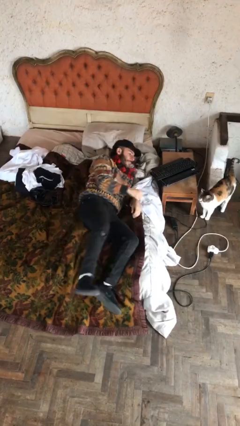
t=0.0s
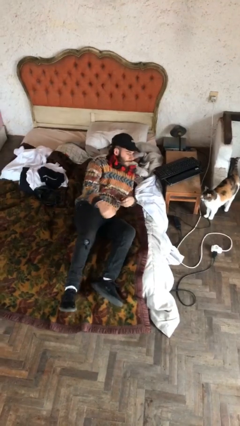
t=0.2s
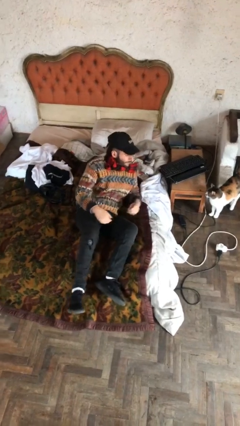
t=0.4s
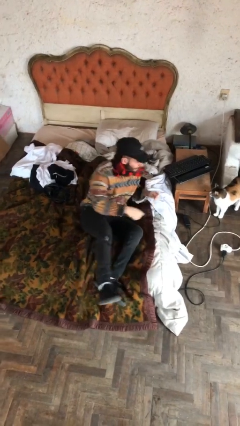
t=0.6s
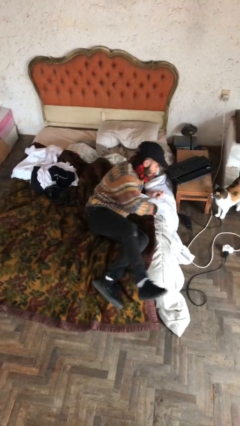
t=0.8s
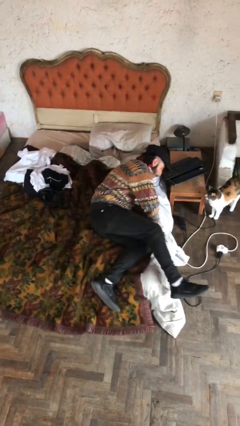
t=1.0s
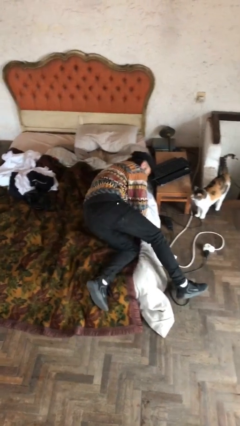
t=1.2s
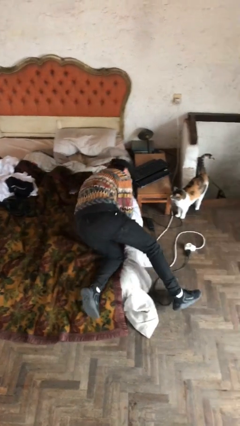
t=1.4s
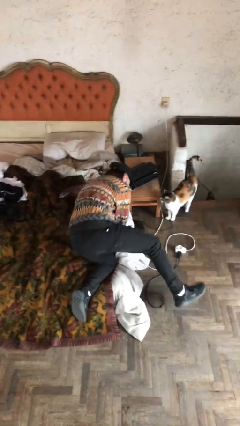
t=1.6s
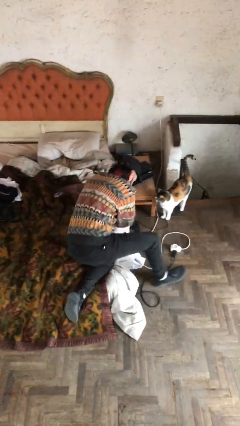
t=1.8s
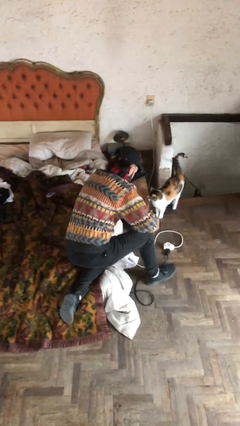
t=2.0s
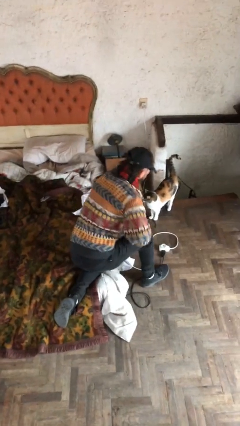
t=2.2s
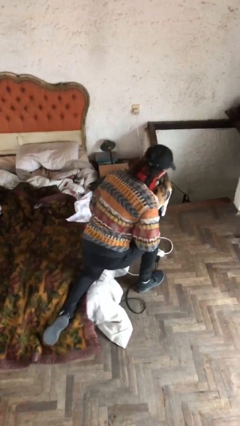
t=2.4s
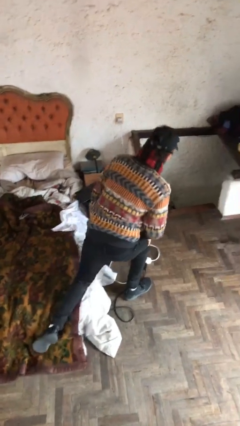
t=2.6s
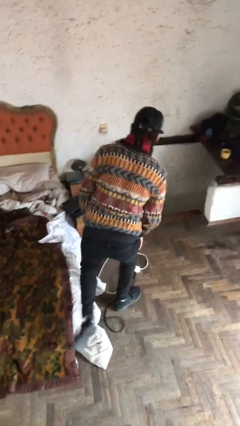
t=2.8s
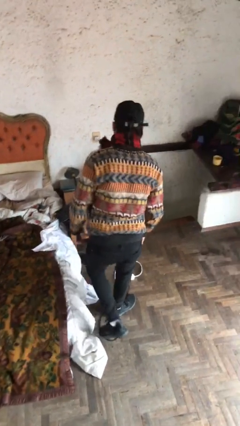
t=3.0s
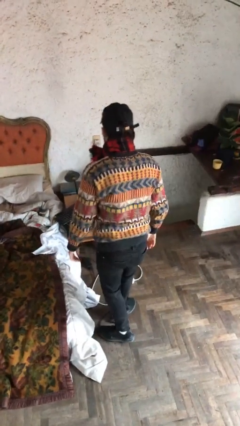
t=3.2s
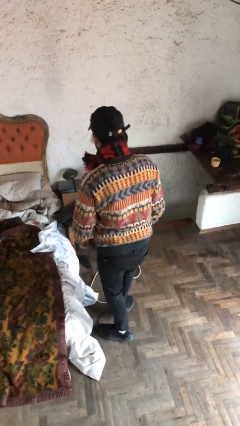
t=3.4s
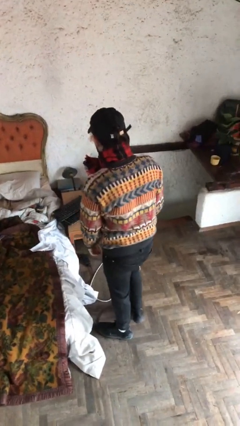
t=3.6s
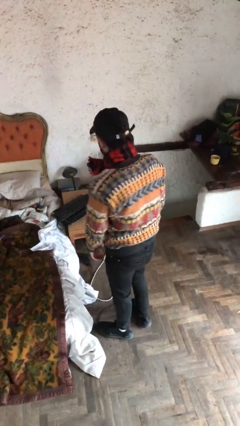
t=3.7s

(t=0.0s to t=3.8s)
person stands up

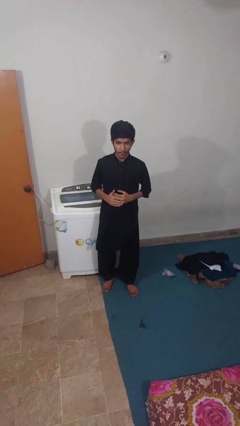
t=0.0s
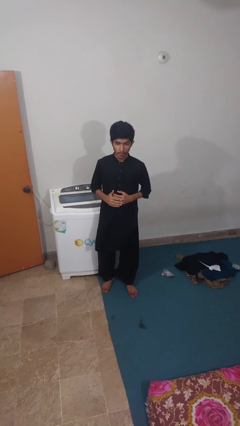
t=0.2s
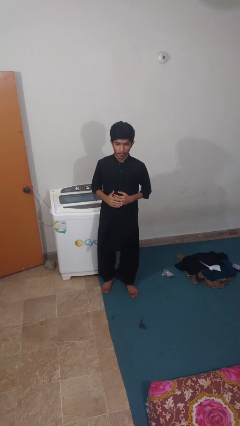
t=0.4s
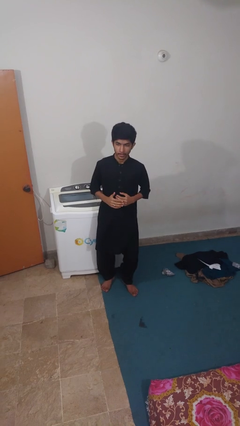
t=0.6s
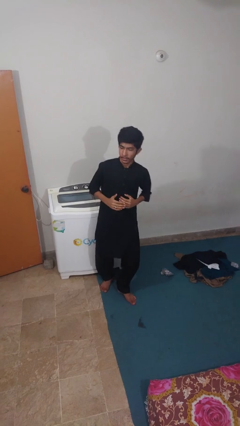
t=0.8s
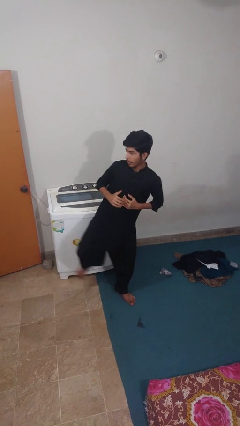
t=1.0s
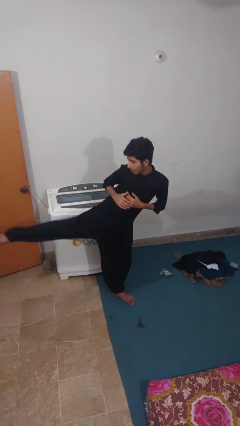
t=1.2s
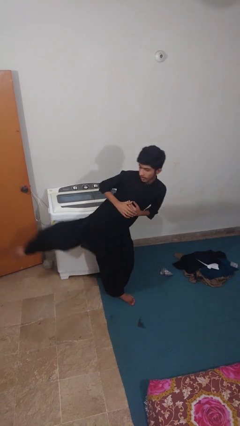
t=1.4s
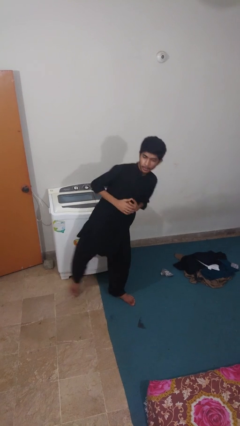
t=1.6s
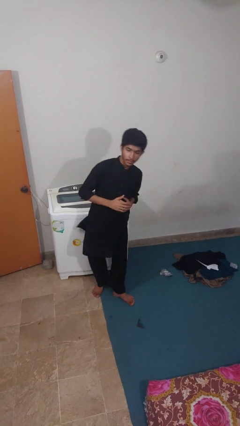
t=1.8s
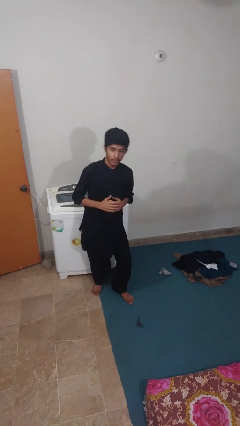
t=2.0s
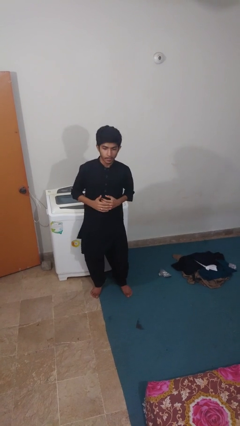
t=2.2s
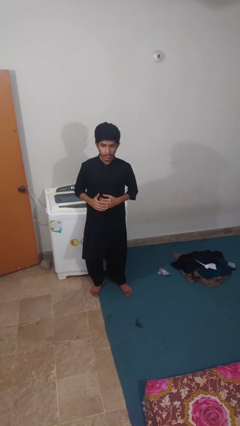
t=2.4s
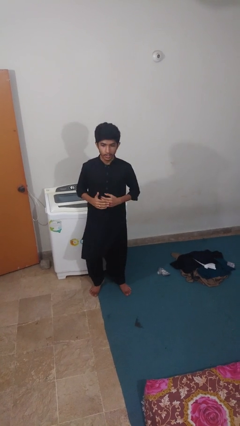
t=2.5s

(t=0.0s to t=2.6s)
person karate kicks

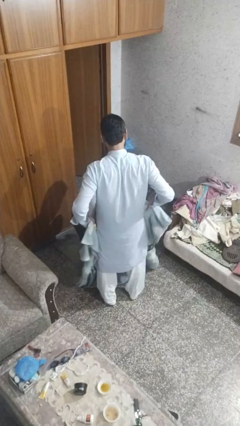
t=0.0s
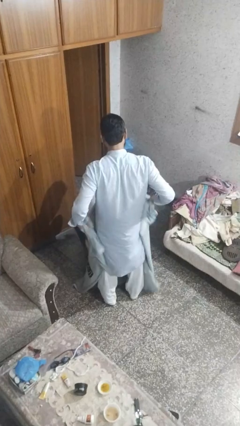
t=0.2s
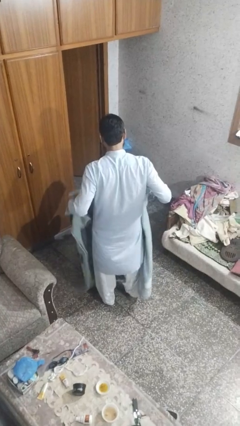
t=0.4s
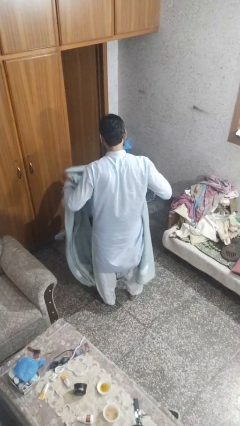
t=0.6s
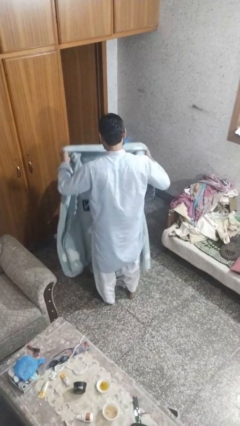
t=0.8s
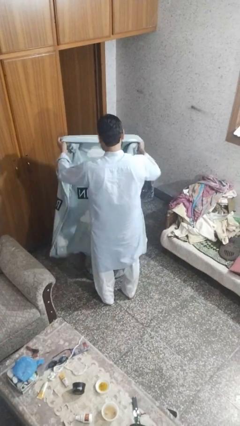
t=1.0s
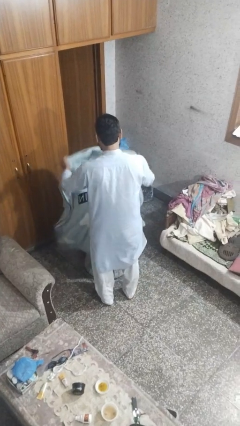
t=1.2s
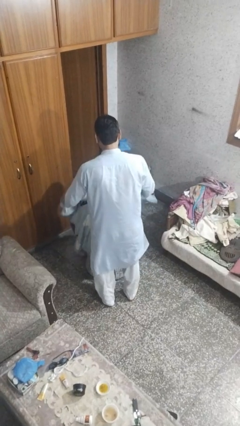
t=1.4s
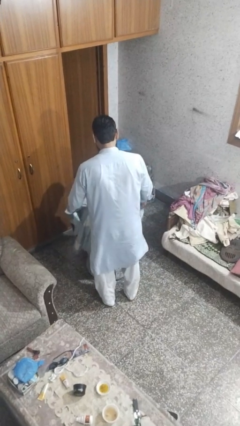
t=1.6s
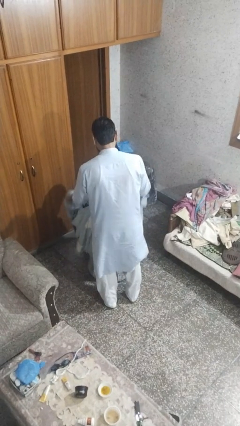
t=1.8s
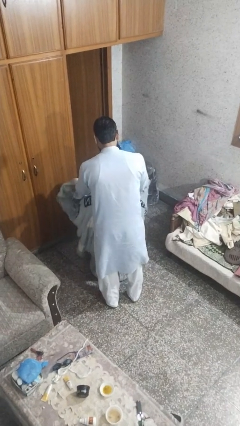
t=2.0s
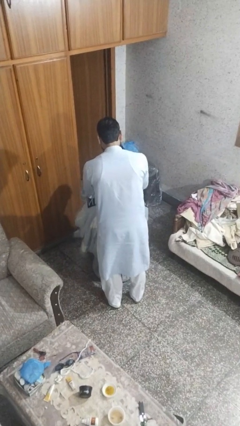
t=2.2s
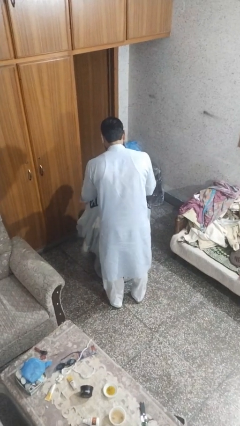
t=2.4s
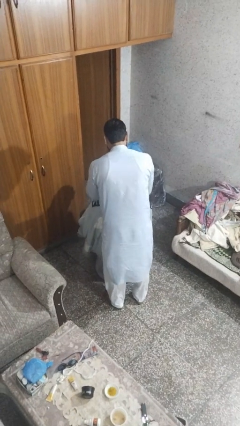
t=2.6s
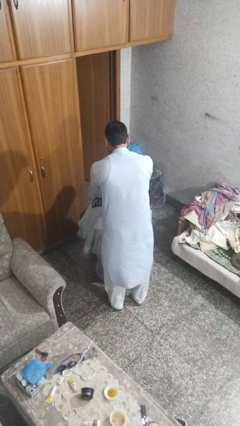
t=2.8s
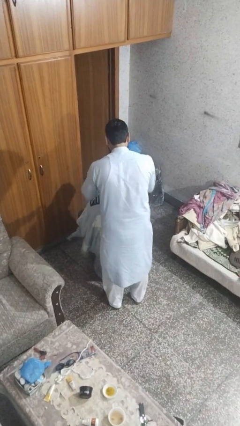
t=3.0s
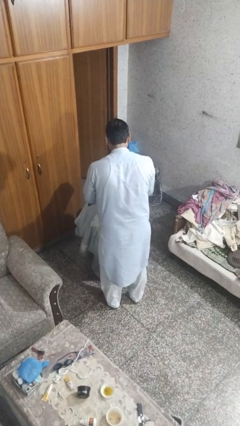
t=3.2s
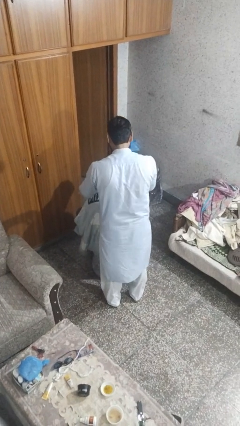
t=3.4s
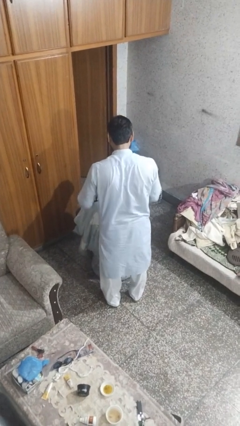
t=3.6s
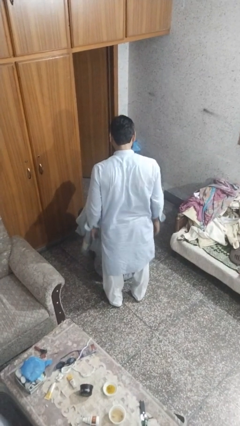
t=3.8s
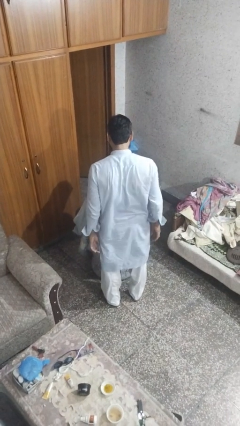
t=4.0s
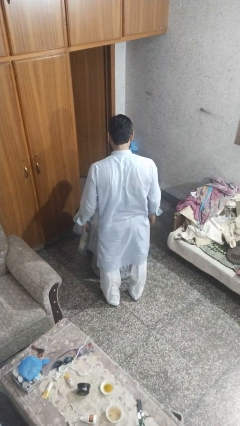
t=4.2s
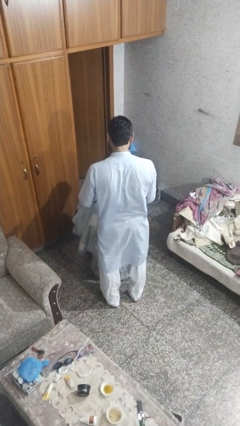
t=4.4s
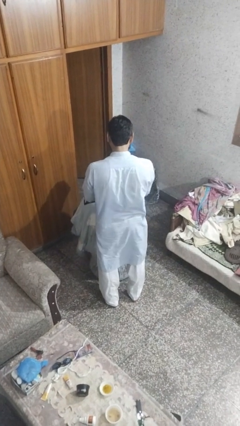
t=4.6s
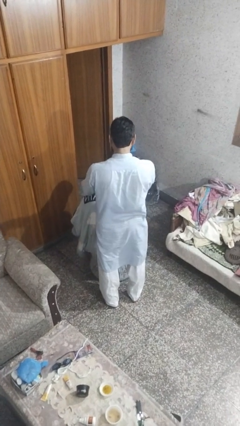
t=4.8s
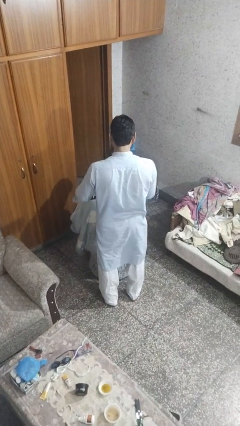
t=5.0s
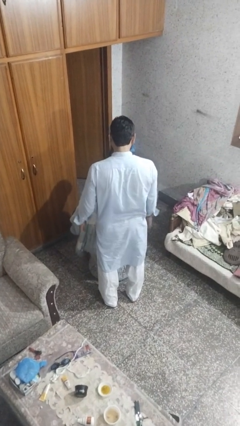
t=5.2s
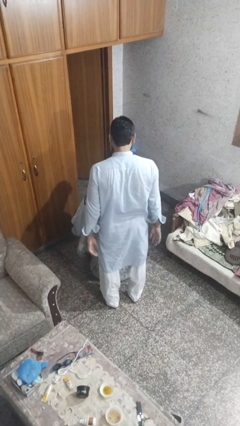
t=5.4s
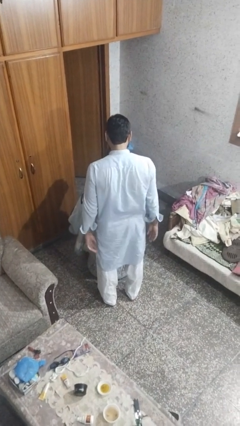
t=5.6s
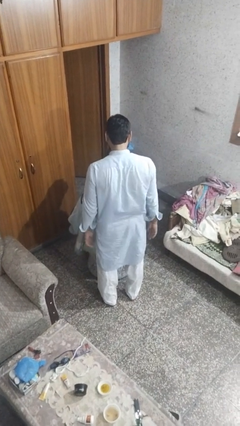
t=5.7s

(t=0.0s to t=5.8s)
person covers friend with blanket

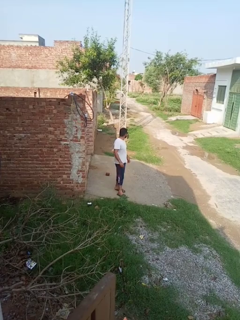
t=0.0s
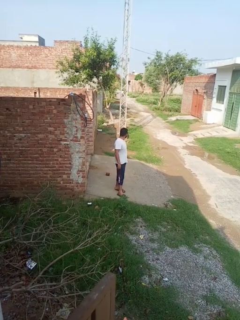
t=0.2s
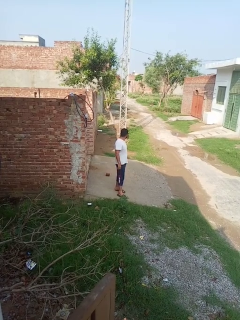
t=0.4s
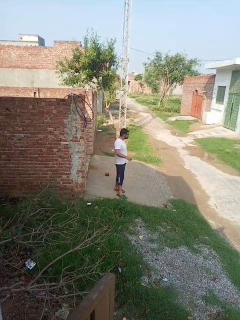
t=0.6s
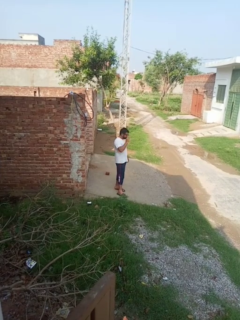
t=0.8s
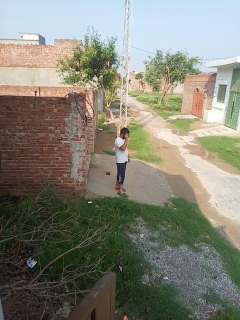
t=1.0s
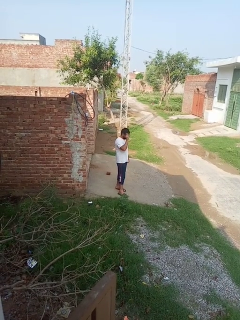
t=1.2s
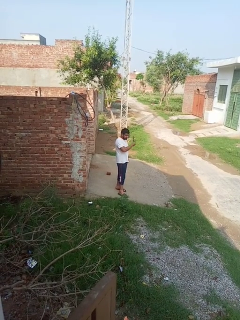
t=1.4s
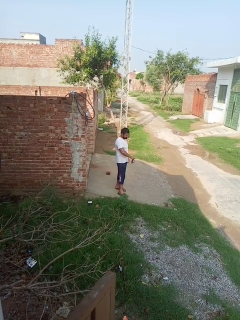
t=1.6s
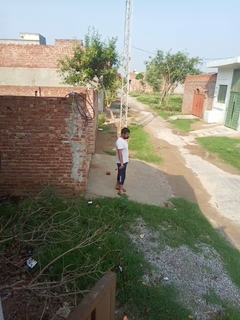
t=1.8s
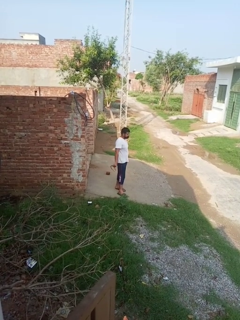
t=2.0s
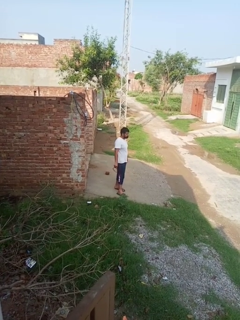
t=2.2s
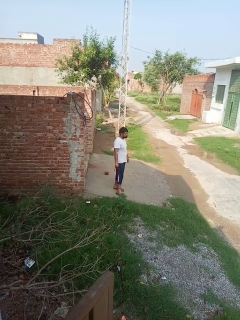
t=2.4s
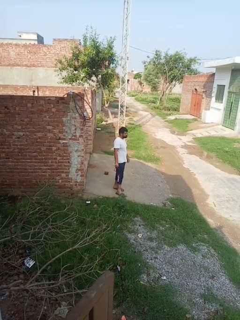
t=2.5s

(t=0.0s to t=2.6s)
person takes off glasses

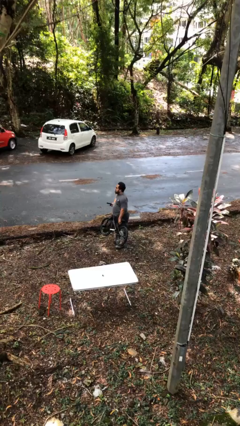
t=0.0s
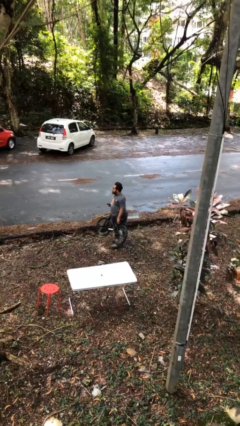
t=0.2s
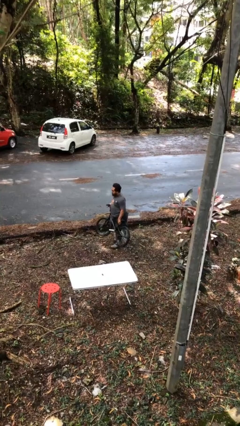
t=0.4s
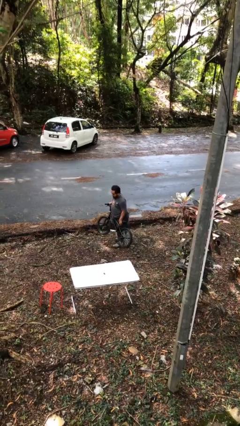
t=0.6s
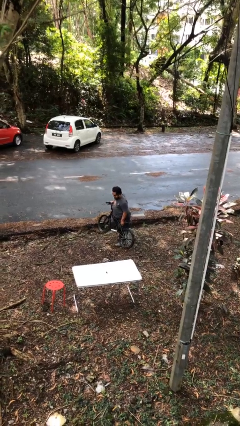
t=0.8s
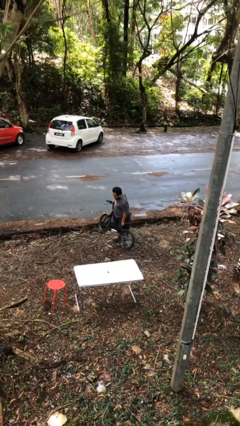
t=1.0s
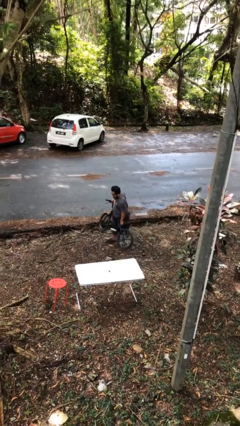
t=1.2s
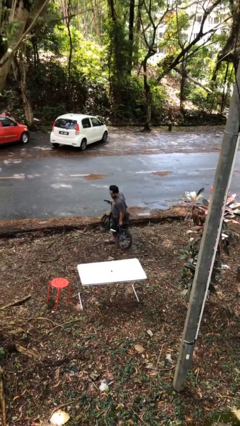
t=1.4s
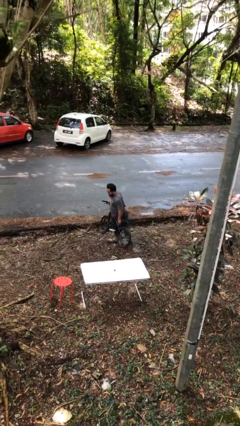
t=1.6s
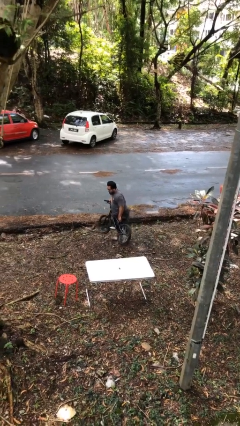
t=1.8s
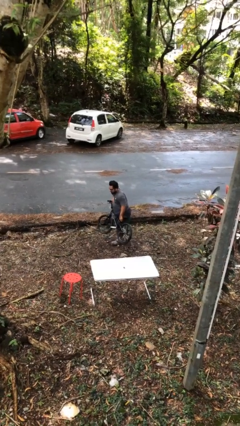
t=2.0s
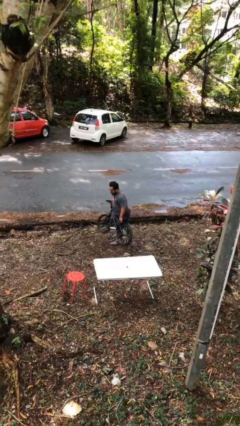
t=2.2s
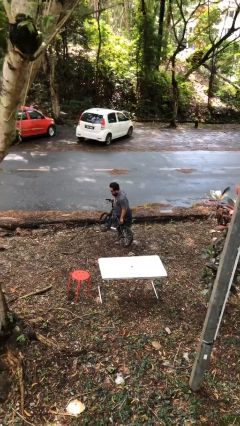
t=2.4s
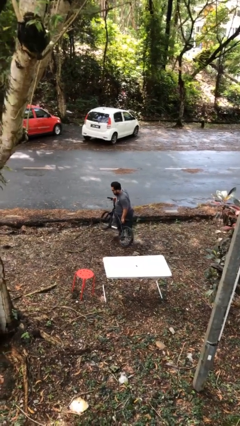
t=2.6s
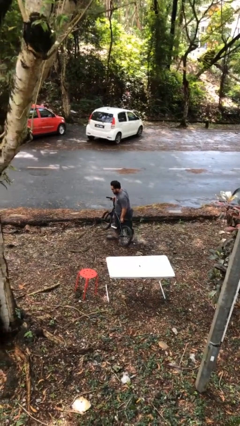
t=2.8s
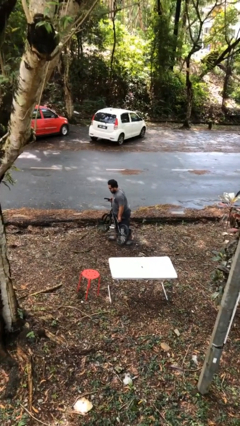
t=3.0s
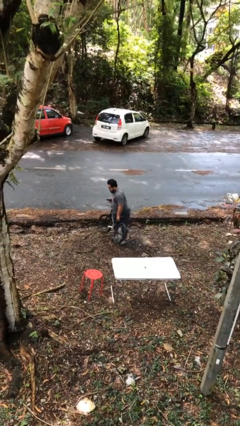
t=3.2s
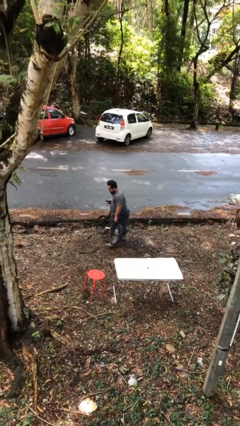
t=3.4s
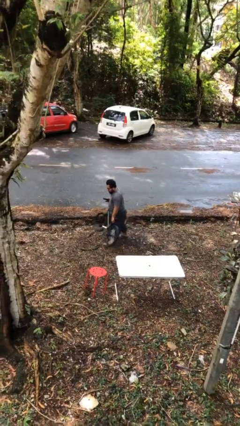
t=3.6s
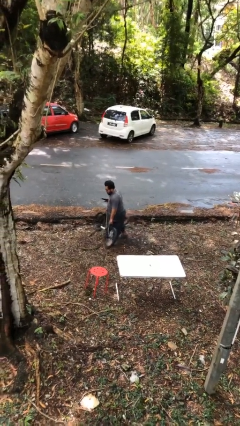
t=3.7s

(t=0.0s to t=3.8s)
person carries heavy object
